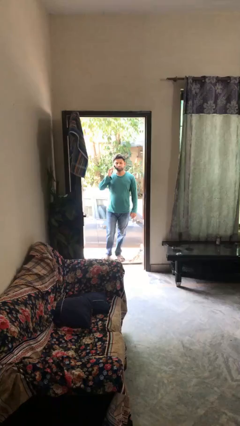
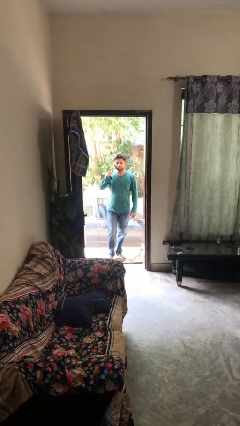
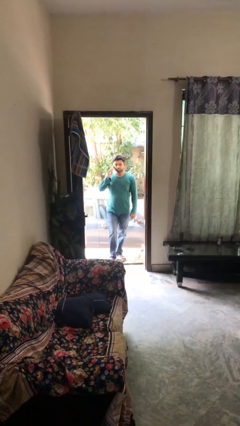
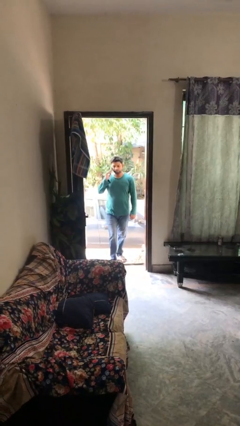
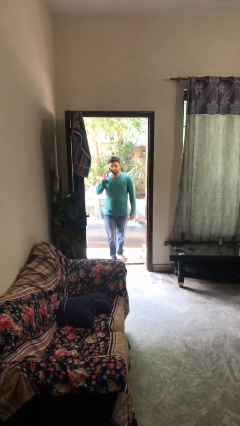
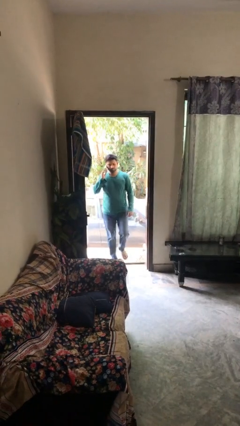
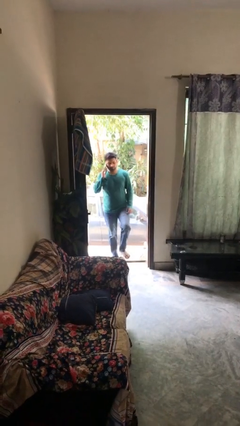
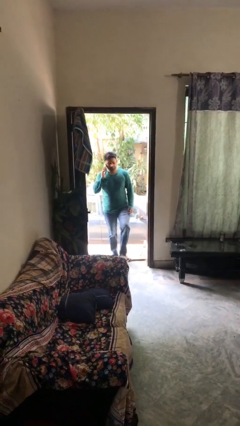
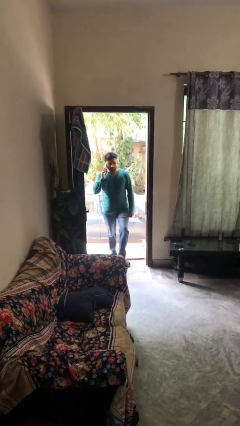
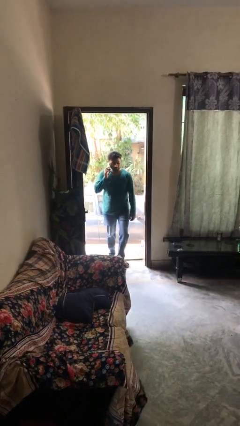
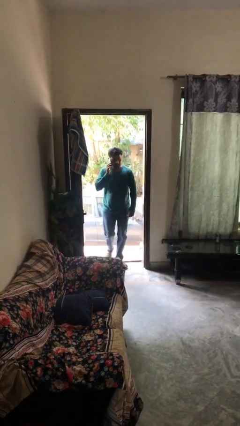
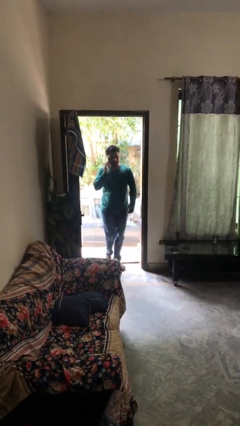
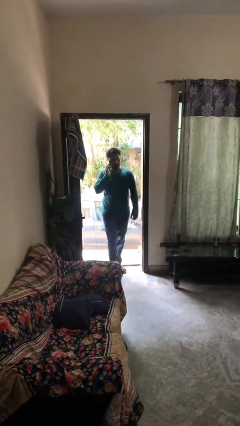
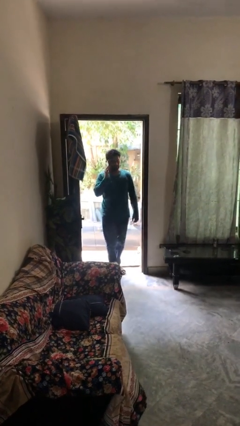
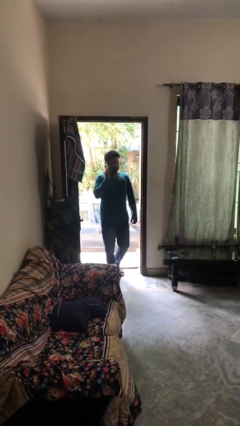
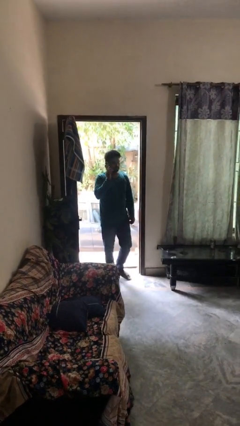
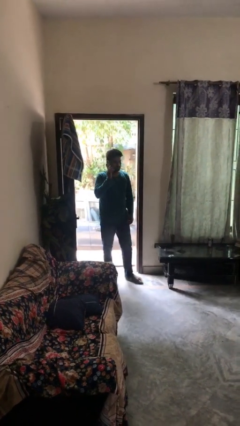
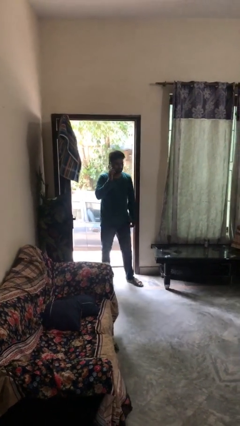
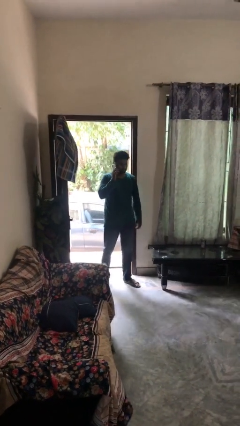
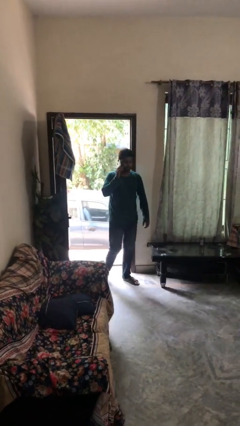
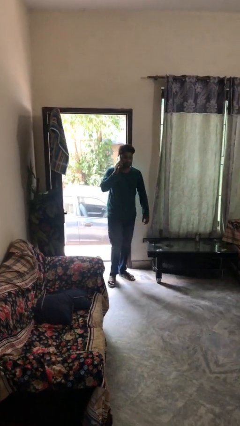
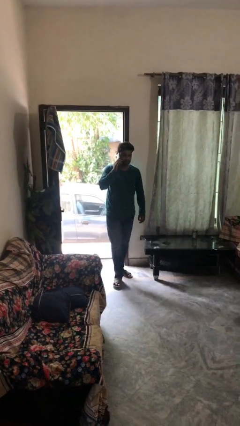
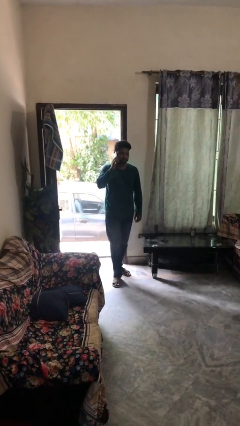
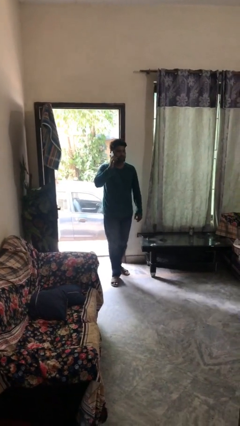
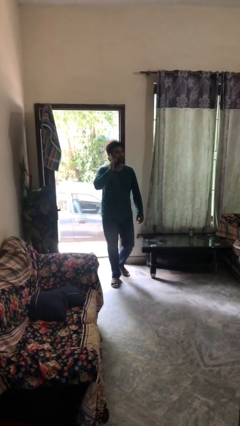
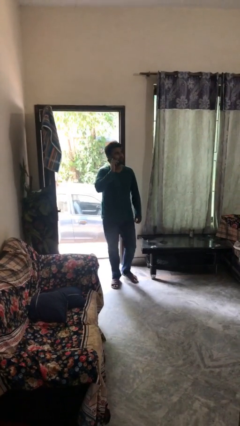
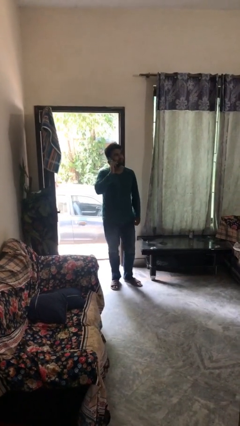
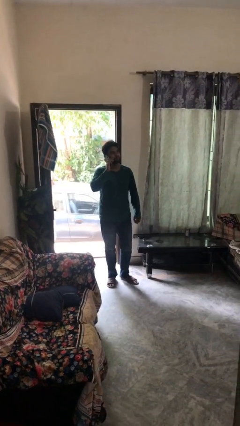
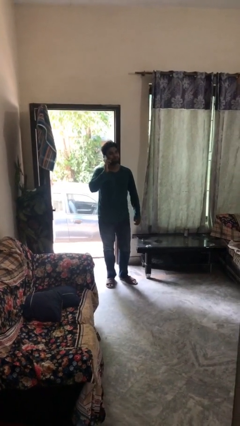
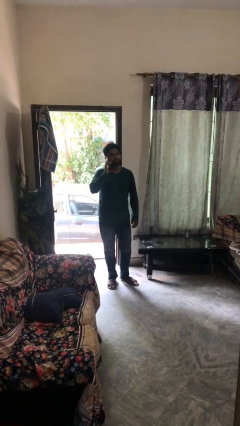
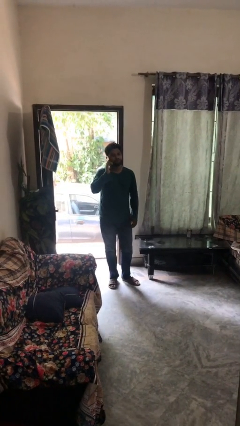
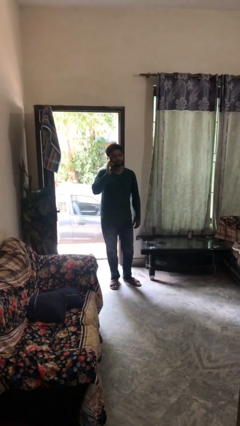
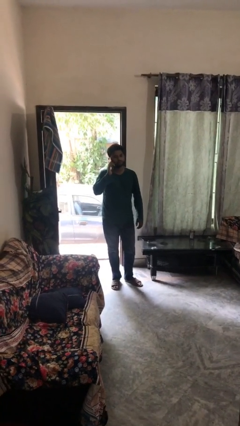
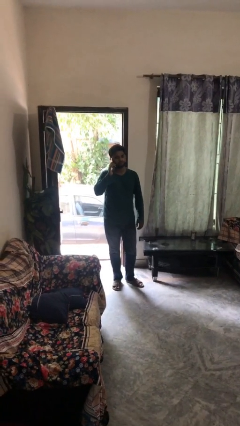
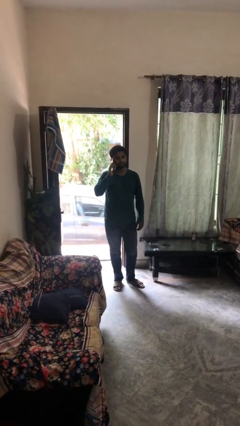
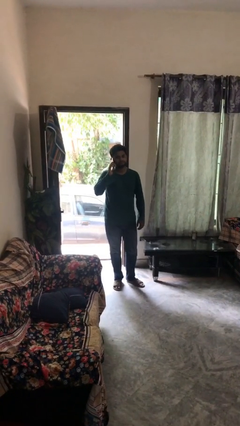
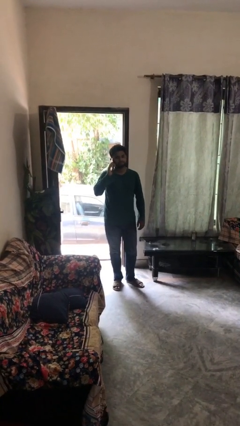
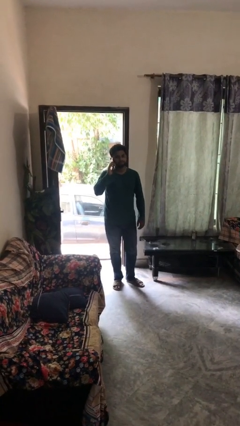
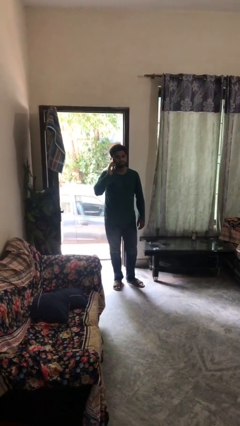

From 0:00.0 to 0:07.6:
person enters scene through structure

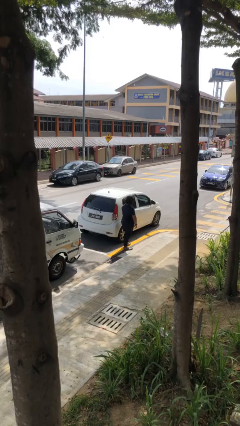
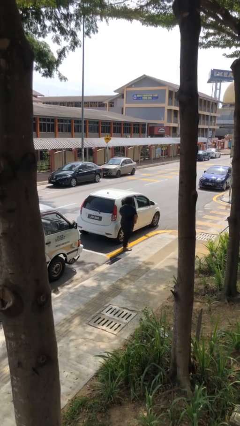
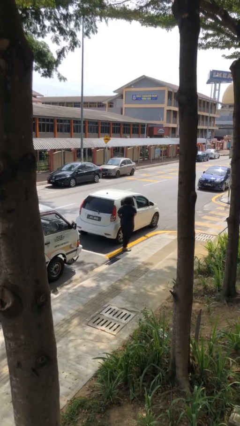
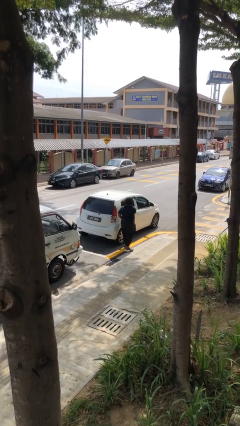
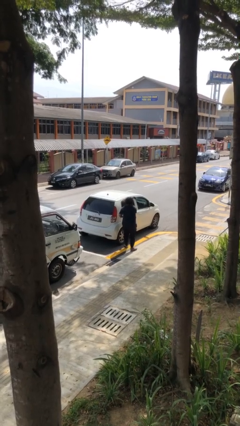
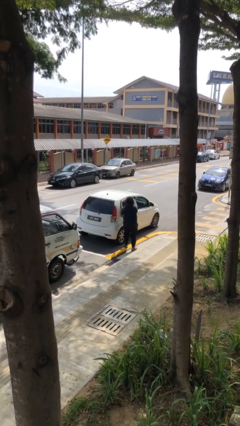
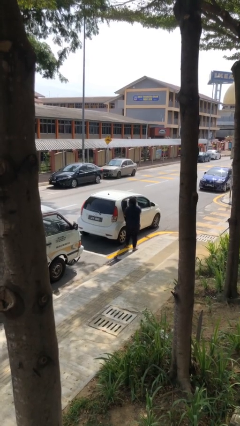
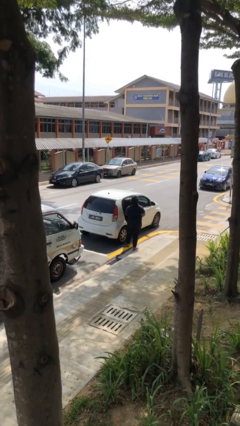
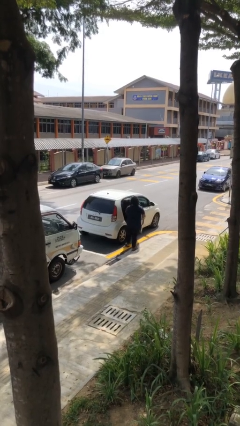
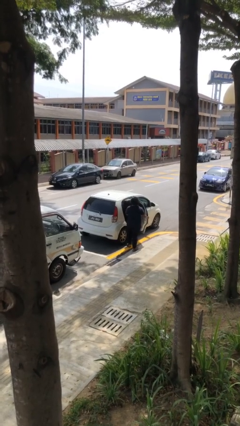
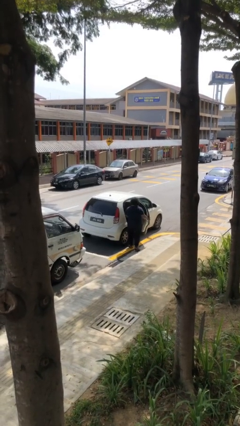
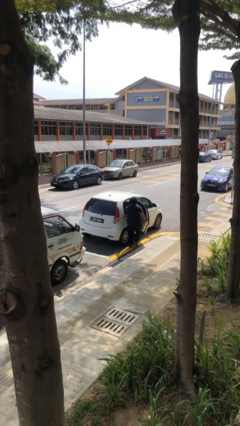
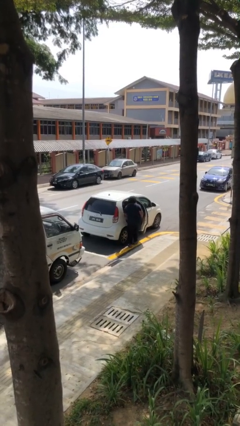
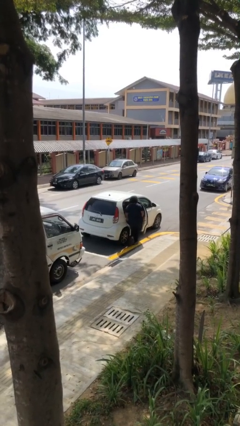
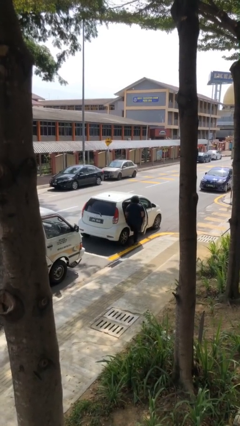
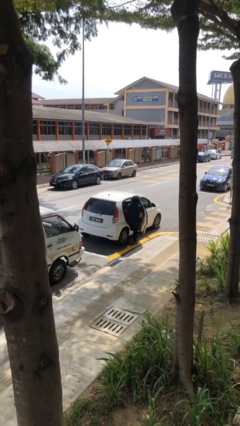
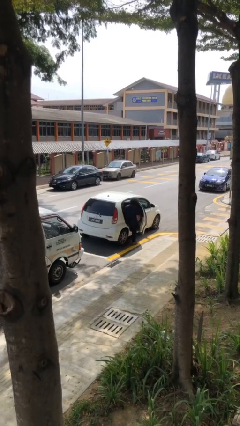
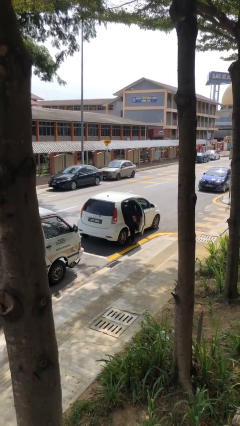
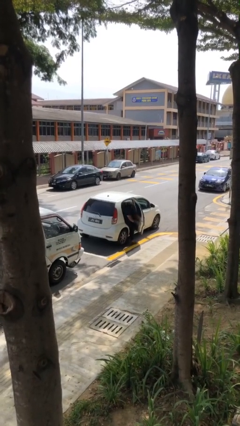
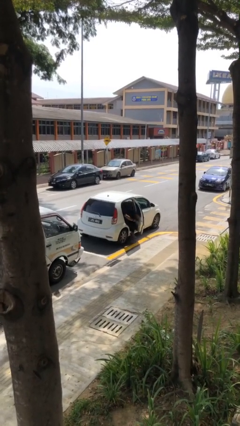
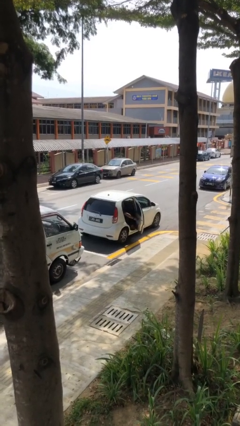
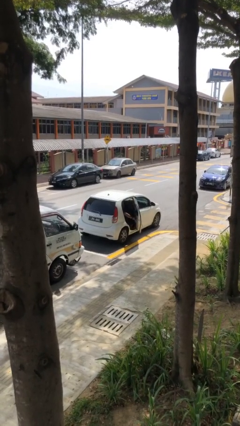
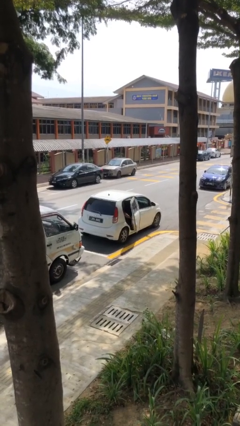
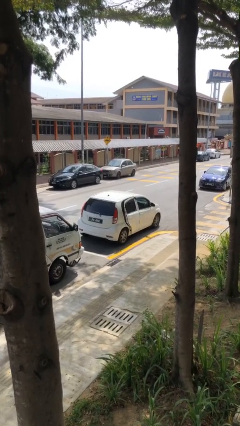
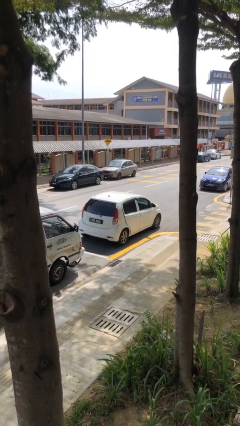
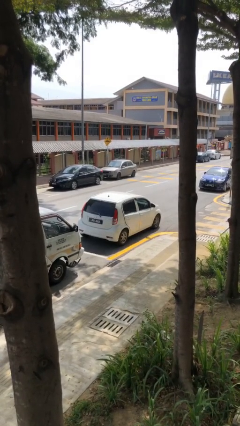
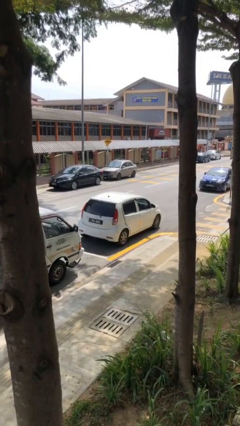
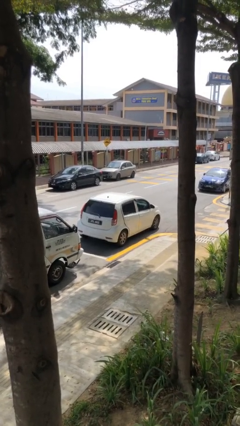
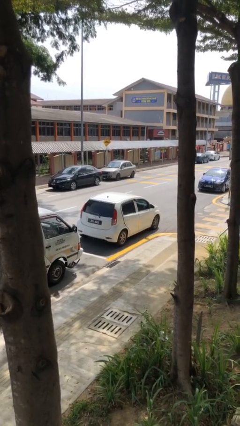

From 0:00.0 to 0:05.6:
car picks up person

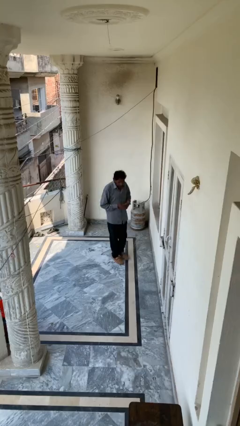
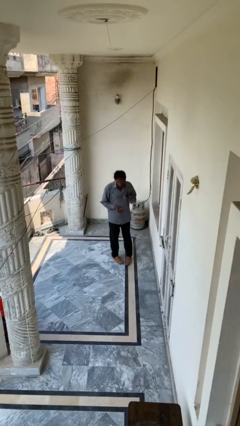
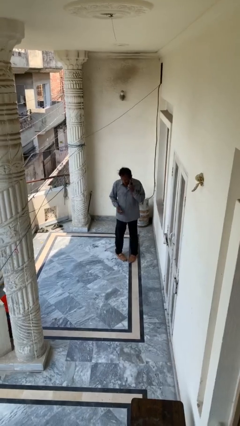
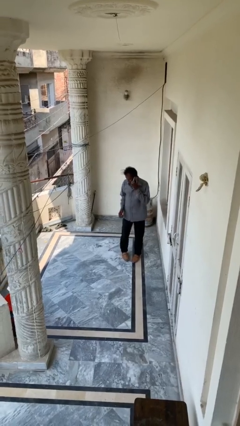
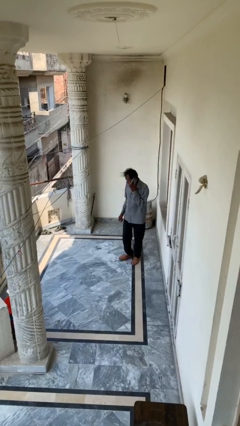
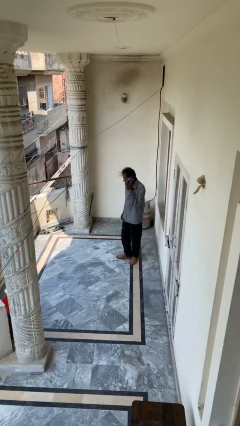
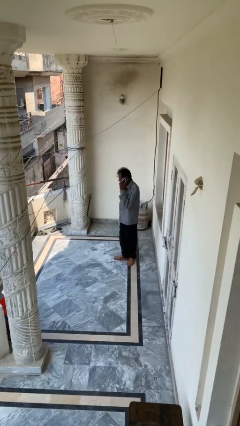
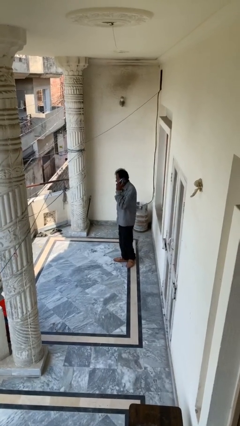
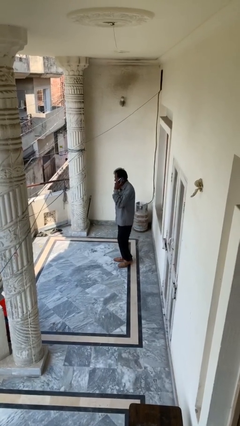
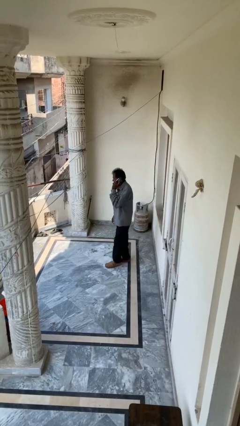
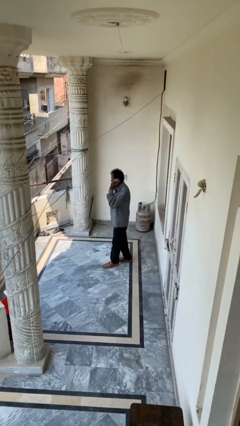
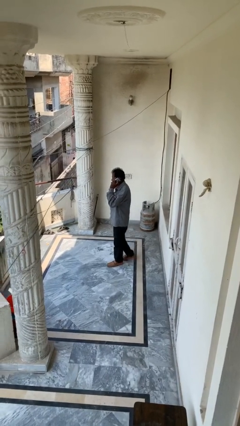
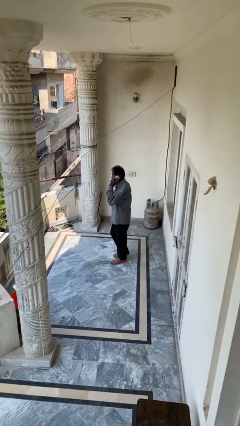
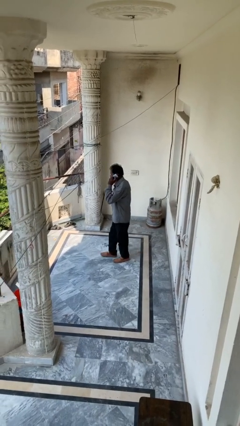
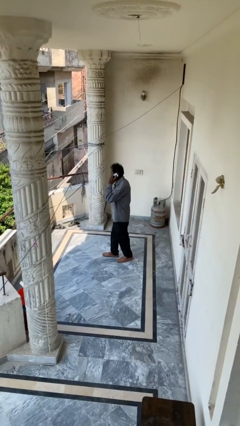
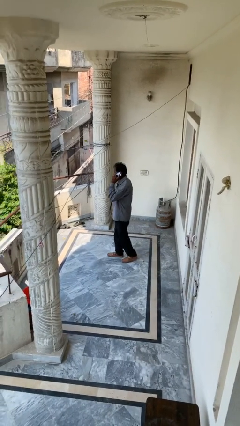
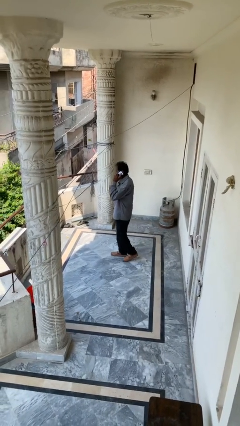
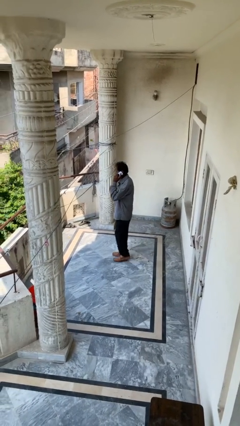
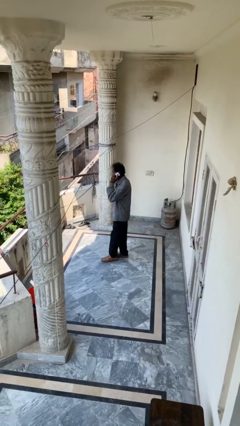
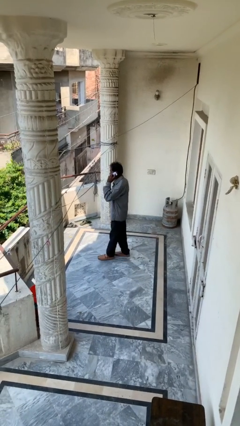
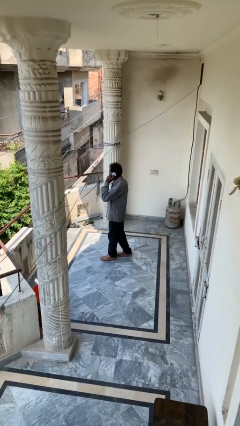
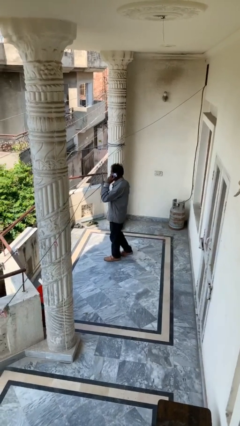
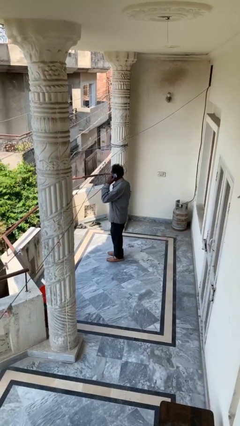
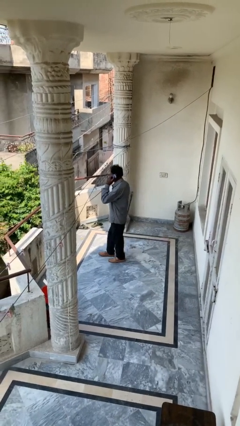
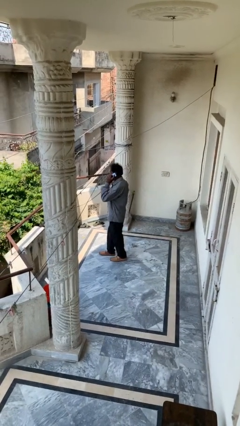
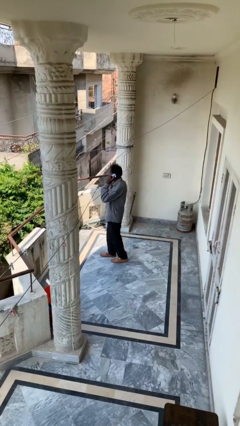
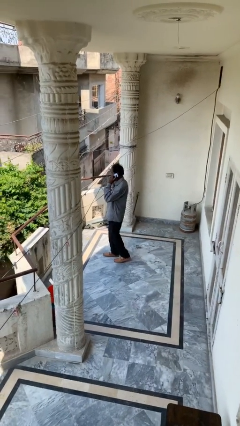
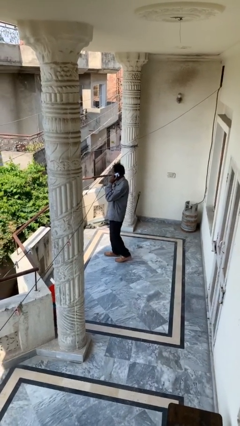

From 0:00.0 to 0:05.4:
person talks on phone
